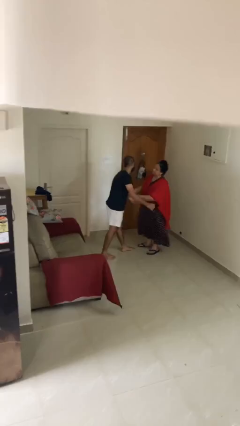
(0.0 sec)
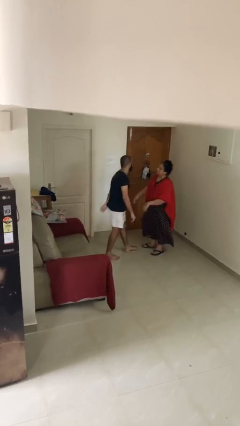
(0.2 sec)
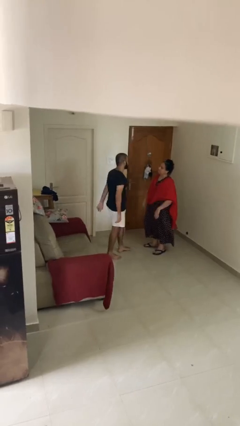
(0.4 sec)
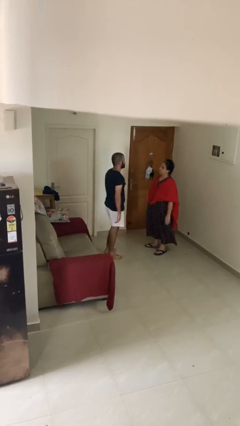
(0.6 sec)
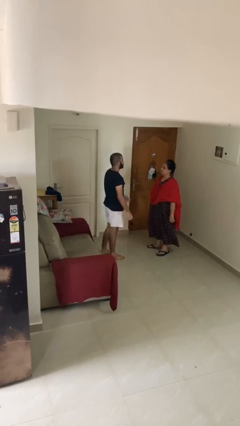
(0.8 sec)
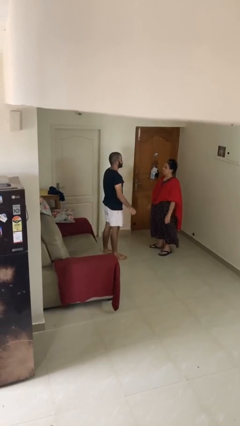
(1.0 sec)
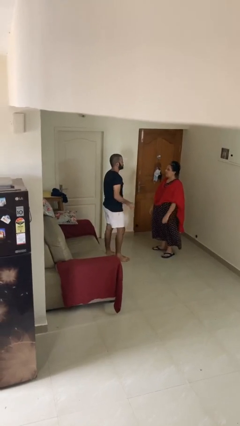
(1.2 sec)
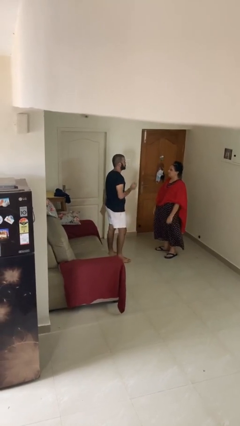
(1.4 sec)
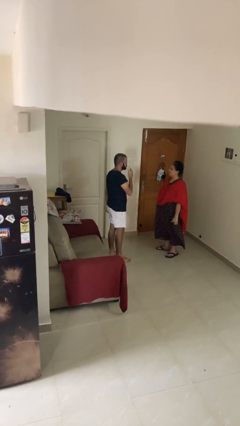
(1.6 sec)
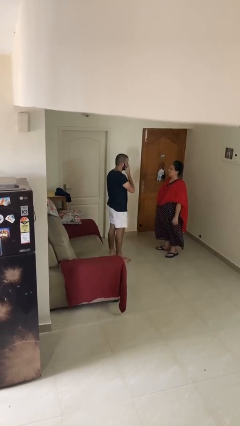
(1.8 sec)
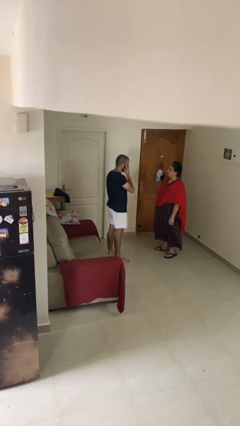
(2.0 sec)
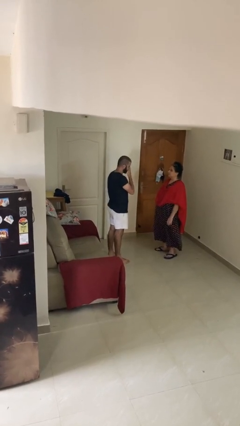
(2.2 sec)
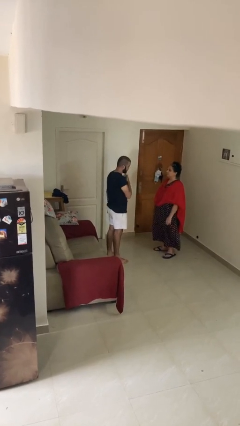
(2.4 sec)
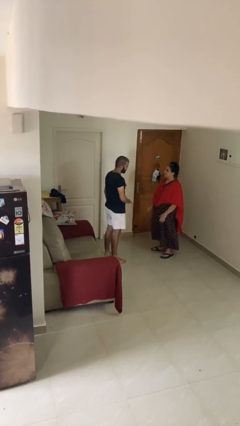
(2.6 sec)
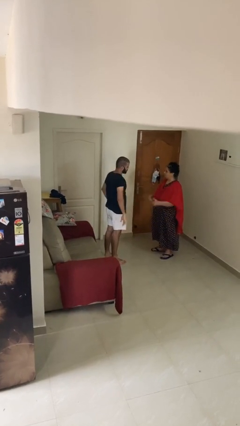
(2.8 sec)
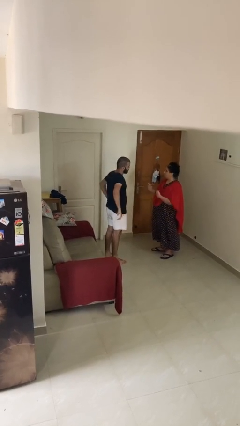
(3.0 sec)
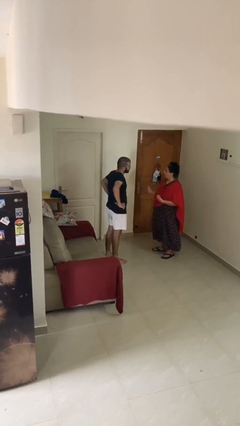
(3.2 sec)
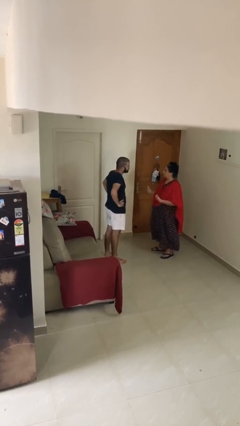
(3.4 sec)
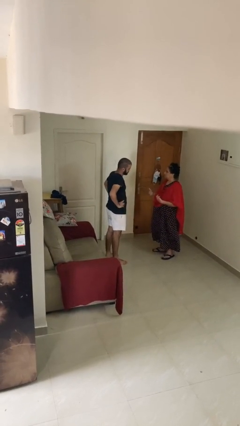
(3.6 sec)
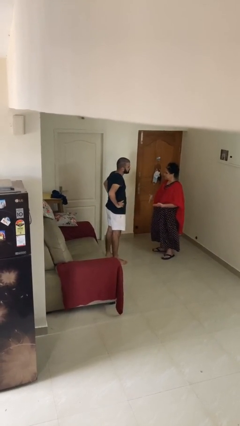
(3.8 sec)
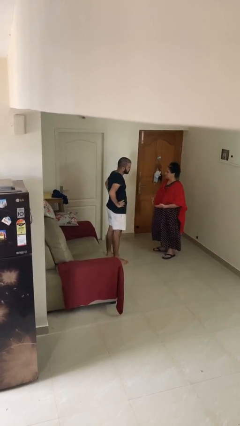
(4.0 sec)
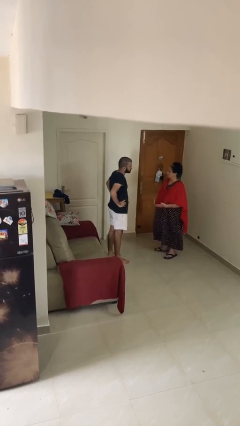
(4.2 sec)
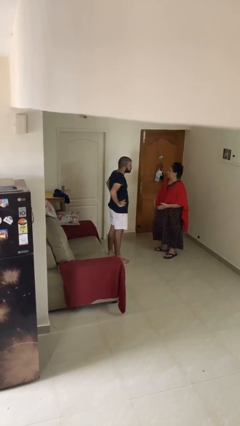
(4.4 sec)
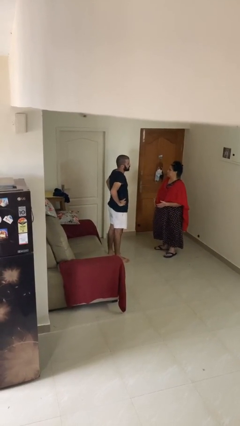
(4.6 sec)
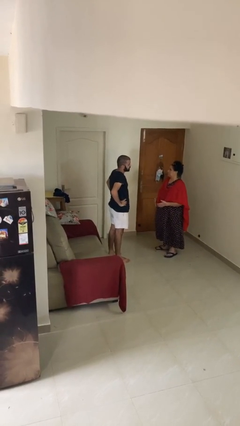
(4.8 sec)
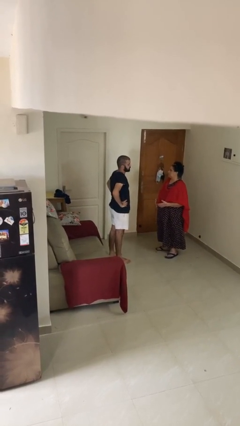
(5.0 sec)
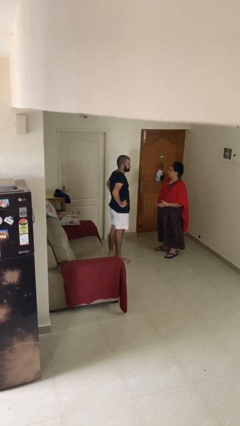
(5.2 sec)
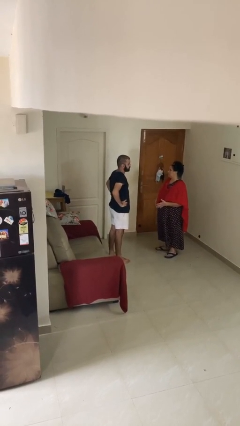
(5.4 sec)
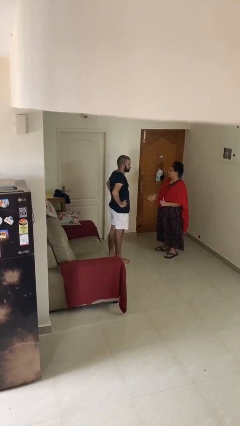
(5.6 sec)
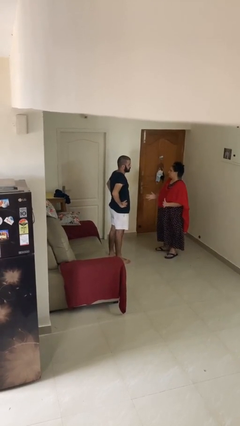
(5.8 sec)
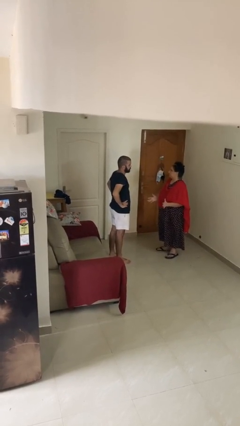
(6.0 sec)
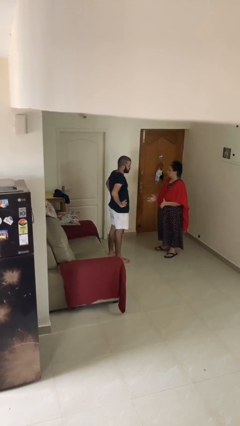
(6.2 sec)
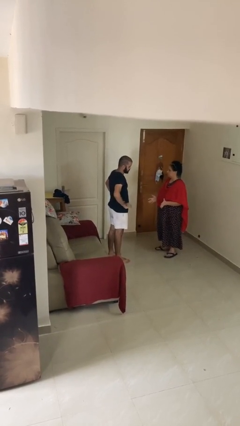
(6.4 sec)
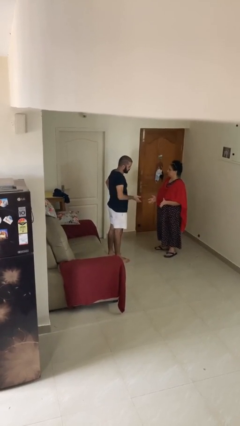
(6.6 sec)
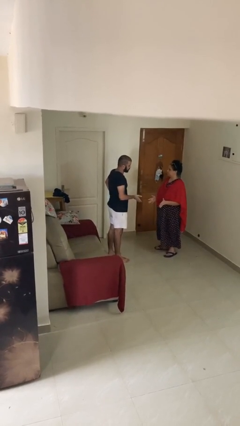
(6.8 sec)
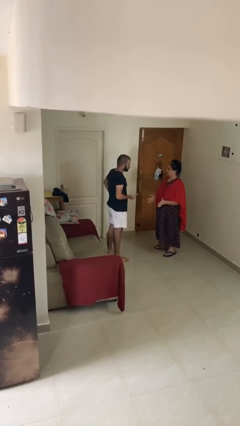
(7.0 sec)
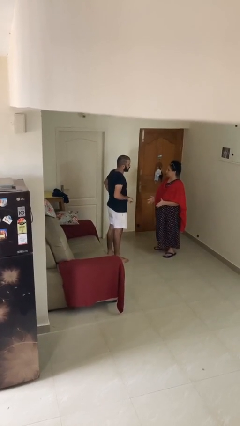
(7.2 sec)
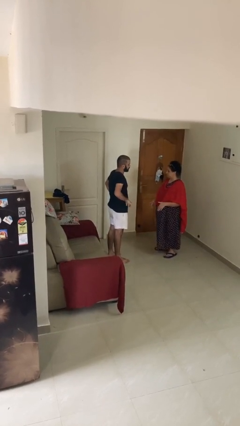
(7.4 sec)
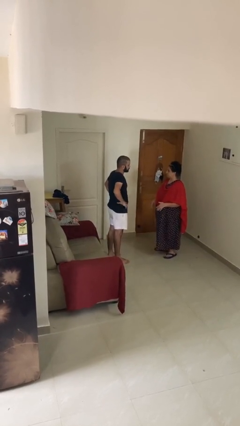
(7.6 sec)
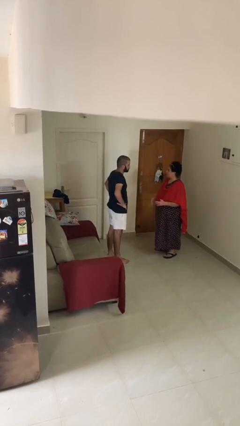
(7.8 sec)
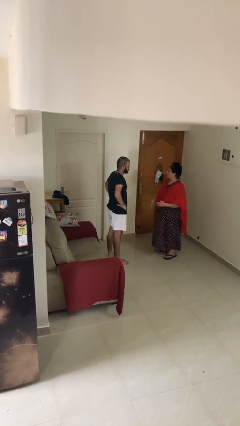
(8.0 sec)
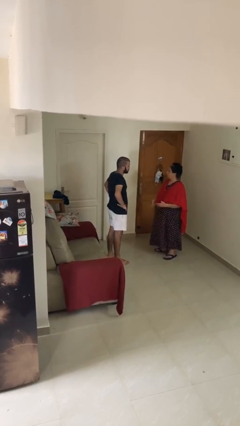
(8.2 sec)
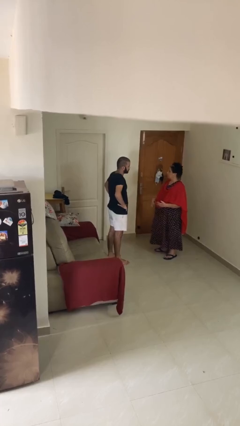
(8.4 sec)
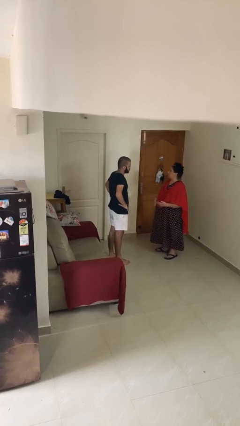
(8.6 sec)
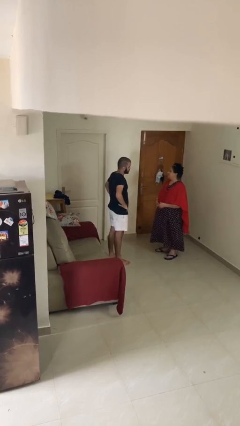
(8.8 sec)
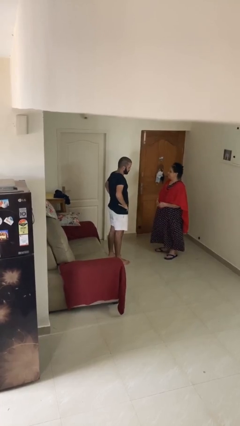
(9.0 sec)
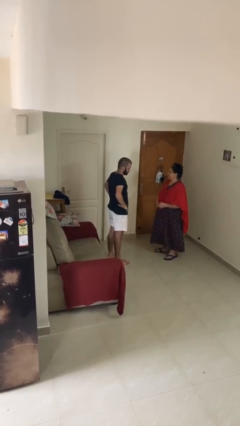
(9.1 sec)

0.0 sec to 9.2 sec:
person talks to person

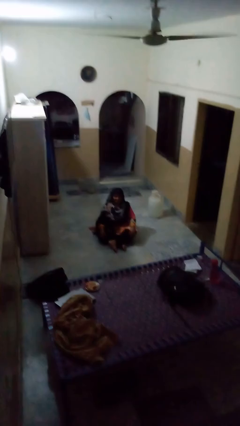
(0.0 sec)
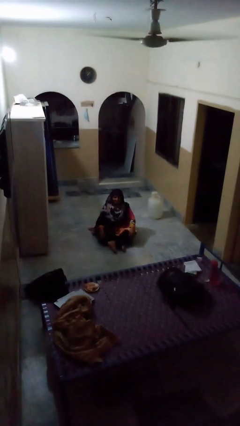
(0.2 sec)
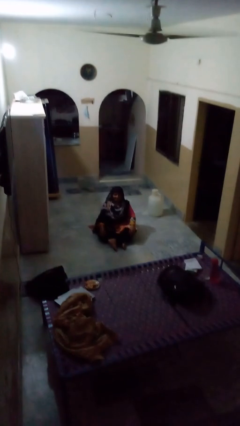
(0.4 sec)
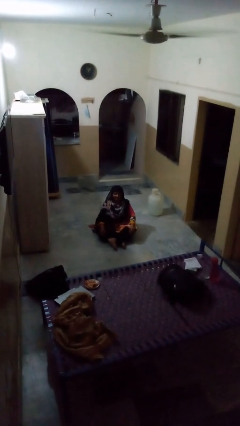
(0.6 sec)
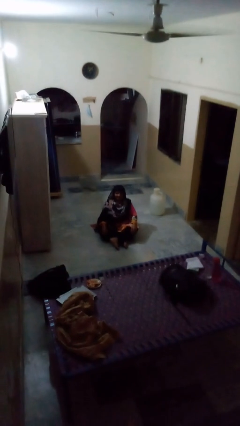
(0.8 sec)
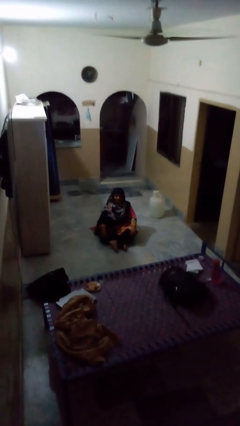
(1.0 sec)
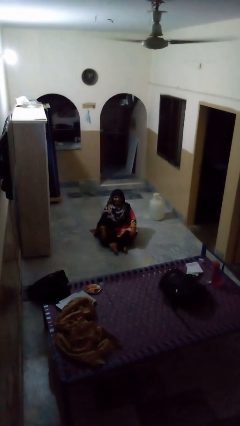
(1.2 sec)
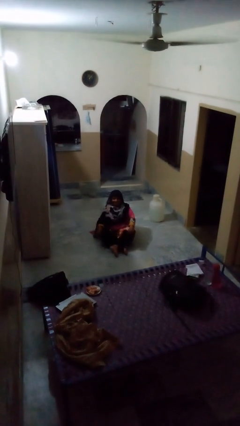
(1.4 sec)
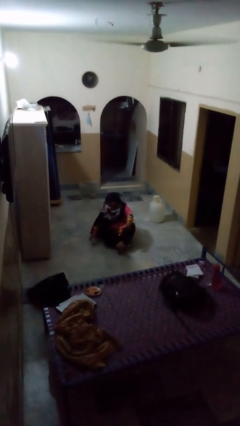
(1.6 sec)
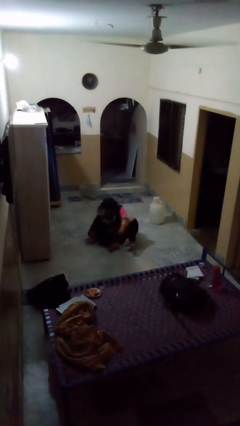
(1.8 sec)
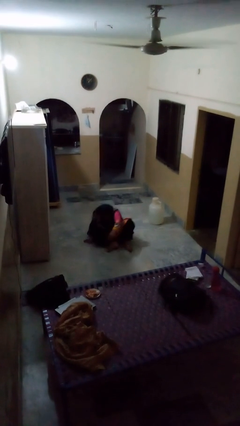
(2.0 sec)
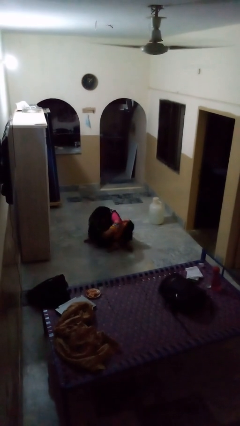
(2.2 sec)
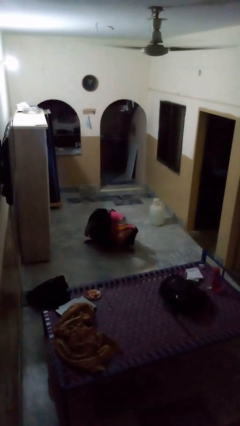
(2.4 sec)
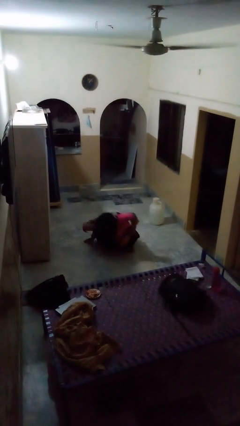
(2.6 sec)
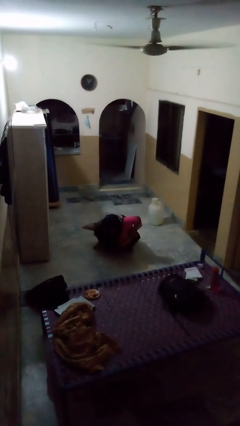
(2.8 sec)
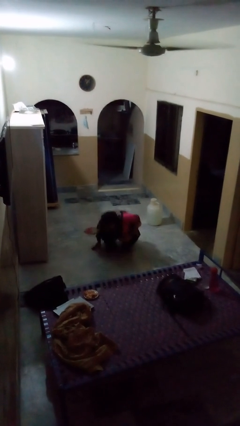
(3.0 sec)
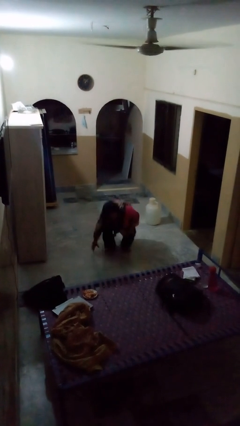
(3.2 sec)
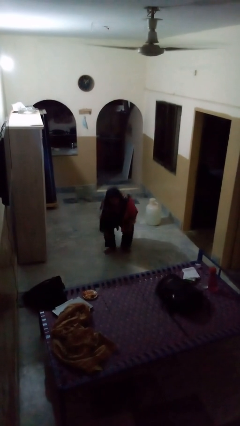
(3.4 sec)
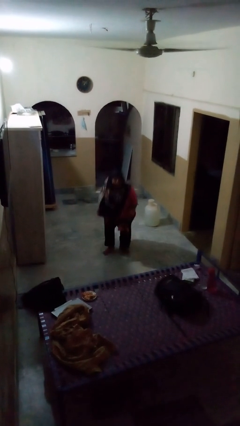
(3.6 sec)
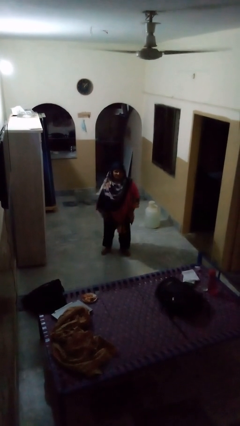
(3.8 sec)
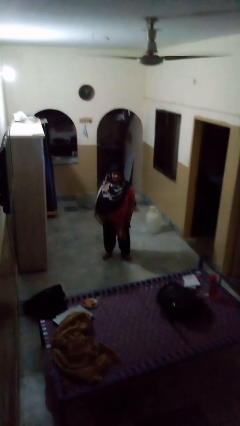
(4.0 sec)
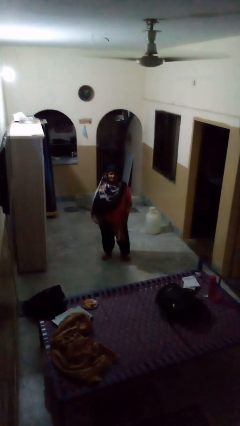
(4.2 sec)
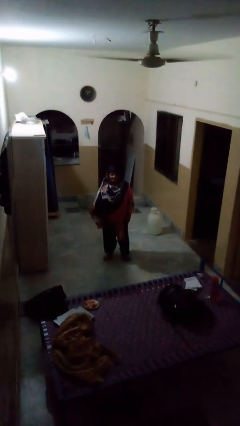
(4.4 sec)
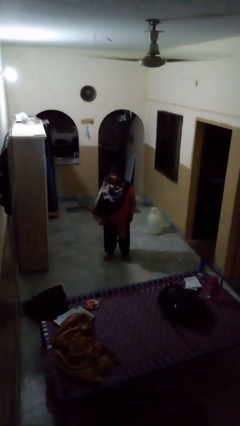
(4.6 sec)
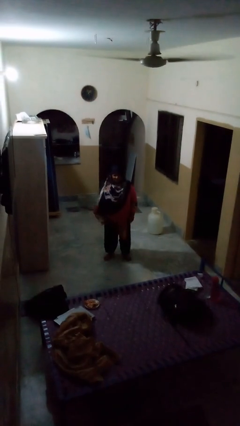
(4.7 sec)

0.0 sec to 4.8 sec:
person stands up from floor

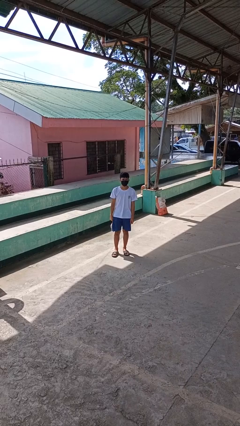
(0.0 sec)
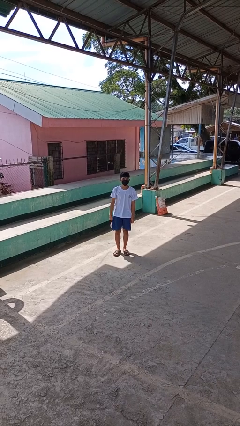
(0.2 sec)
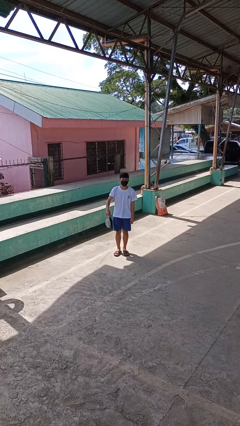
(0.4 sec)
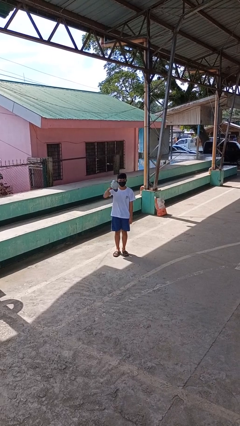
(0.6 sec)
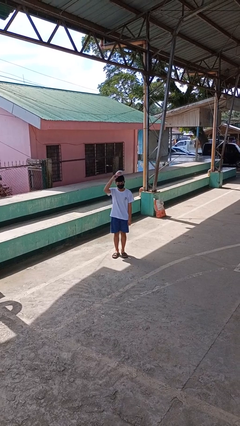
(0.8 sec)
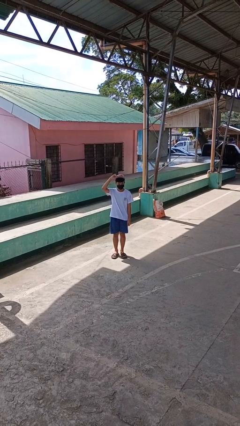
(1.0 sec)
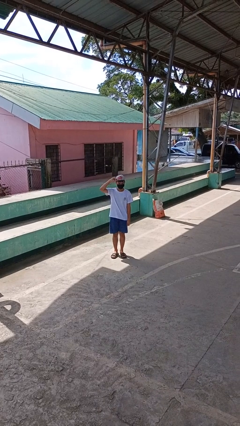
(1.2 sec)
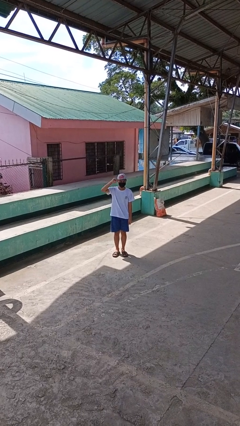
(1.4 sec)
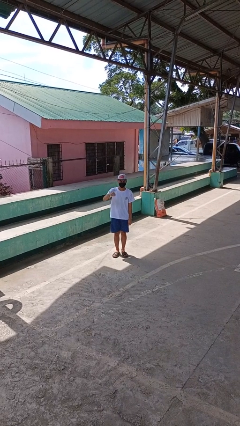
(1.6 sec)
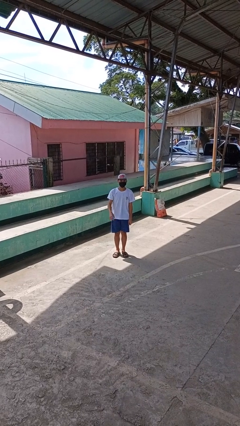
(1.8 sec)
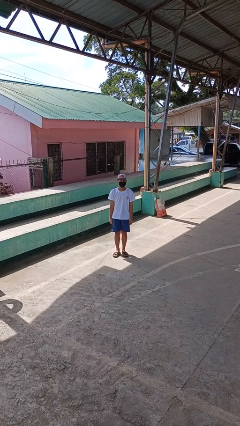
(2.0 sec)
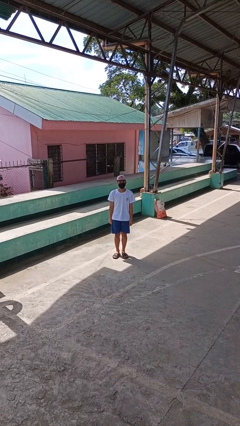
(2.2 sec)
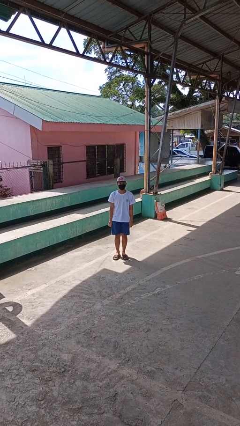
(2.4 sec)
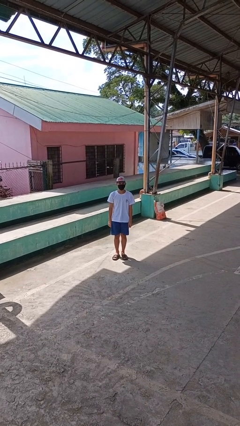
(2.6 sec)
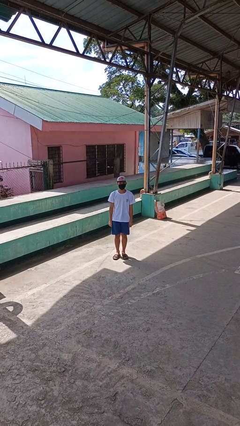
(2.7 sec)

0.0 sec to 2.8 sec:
person puts on hat

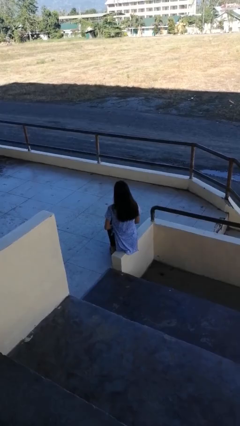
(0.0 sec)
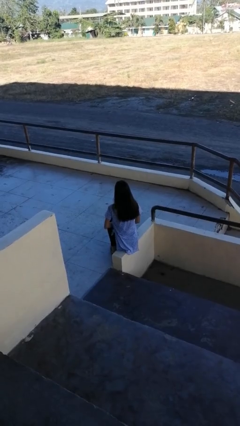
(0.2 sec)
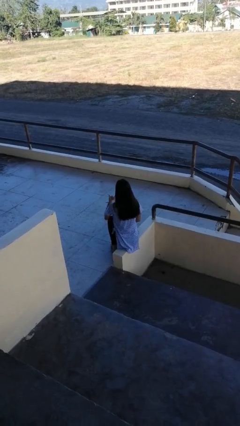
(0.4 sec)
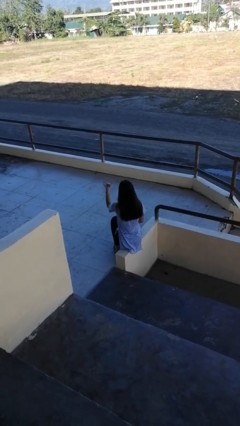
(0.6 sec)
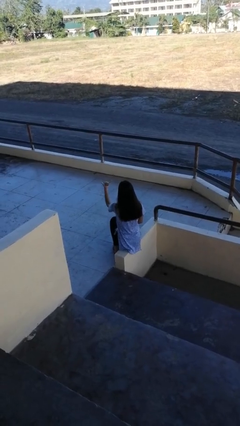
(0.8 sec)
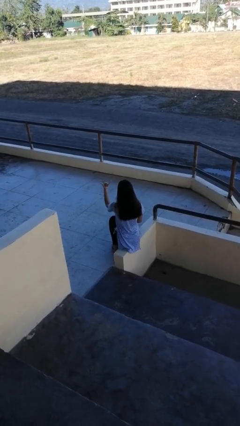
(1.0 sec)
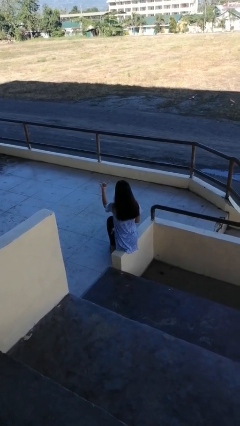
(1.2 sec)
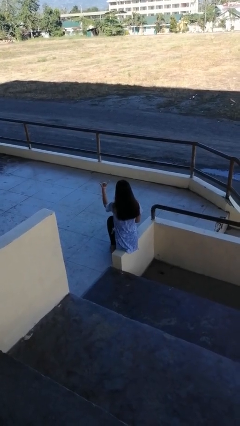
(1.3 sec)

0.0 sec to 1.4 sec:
person gestures hang loose
